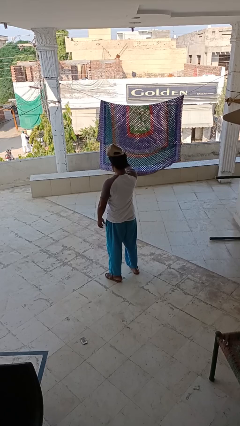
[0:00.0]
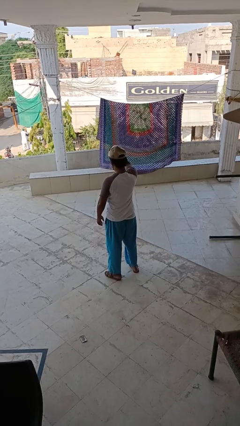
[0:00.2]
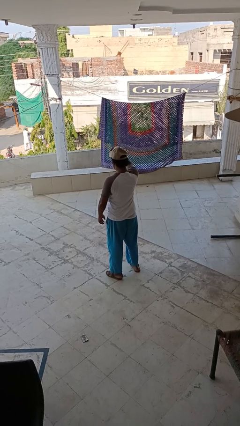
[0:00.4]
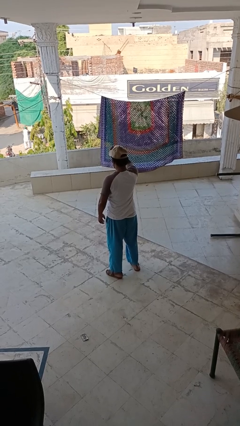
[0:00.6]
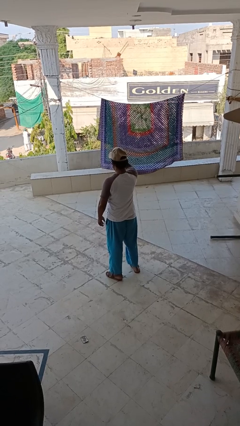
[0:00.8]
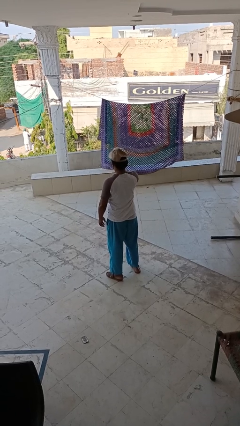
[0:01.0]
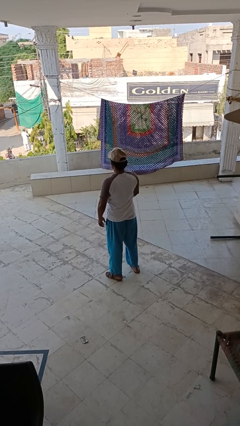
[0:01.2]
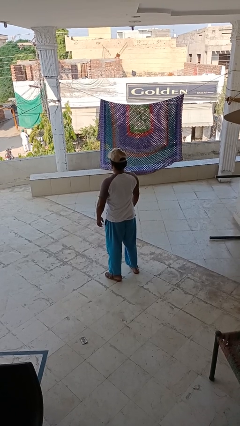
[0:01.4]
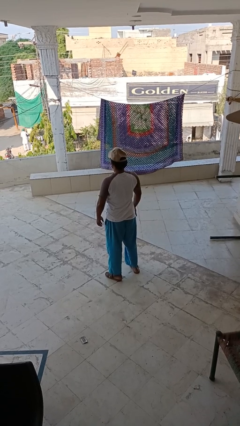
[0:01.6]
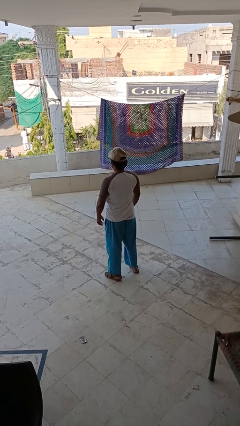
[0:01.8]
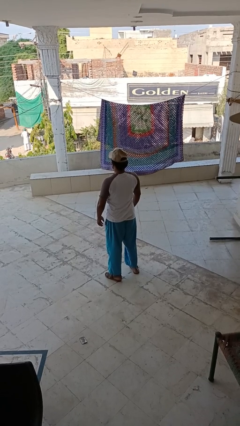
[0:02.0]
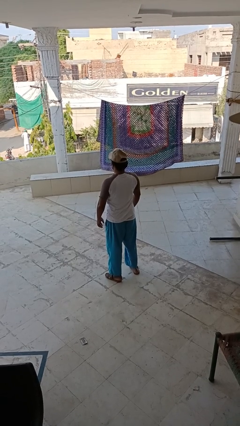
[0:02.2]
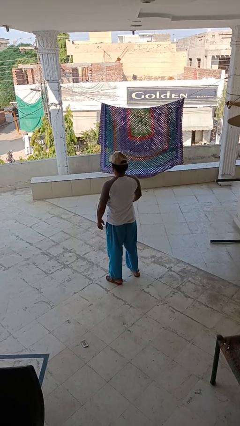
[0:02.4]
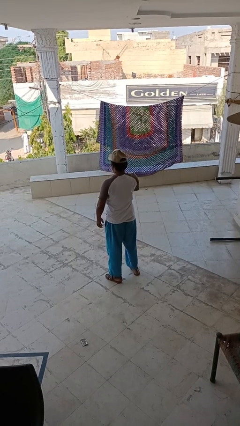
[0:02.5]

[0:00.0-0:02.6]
person puts on hat

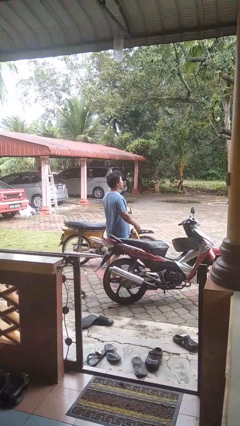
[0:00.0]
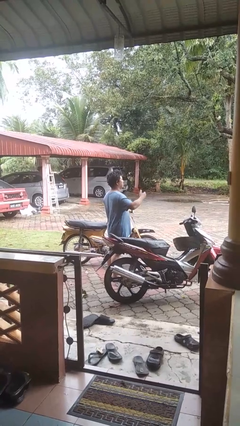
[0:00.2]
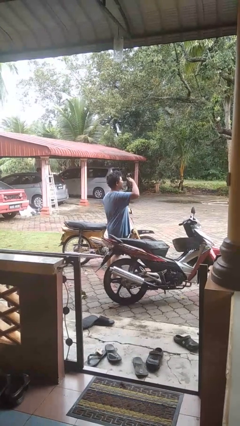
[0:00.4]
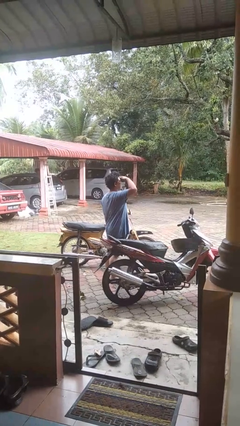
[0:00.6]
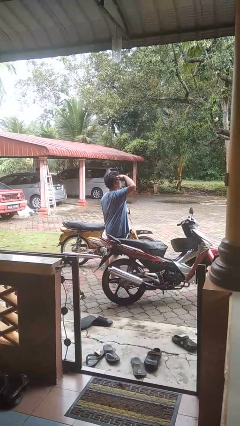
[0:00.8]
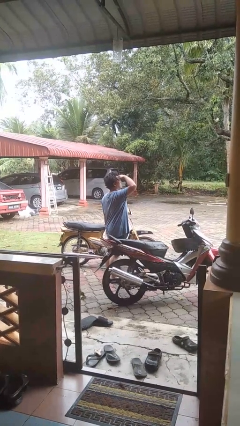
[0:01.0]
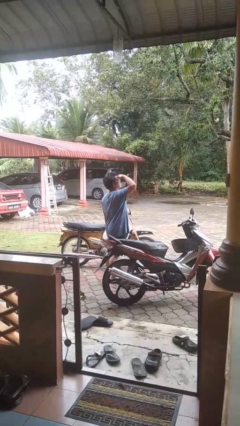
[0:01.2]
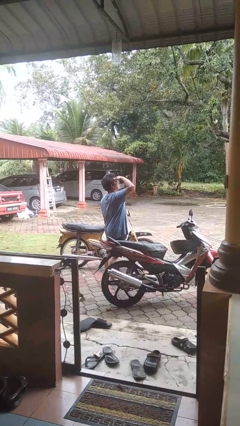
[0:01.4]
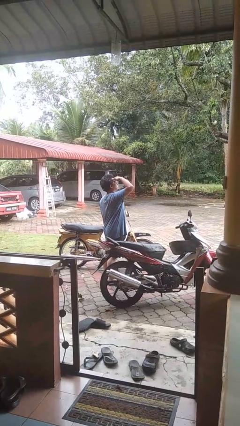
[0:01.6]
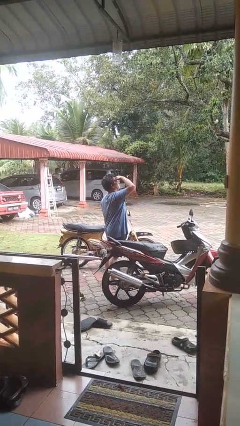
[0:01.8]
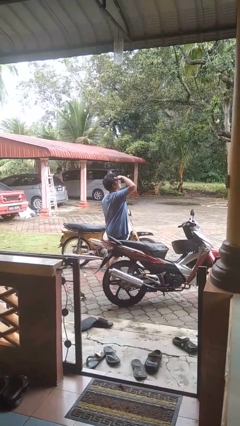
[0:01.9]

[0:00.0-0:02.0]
person shades eyes

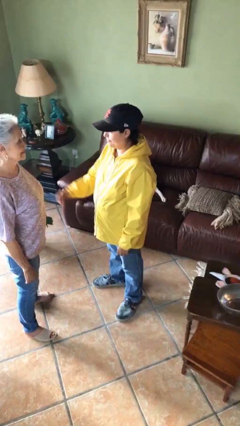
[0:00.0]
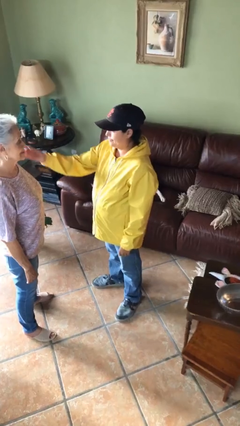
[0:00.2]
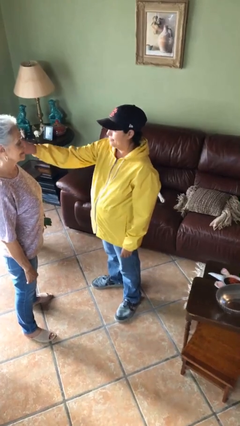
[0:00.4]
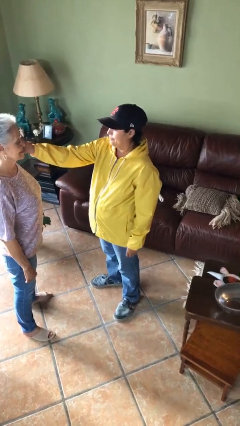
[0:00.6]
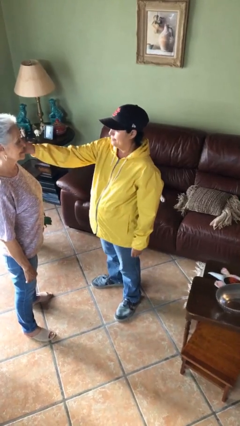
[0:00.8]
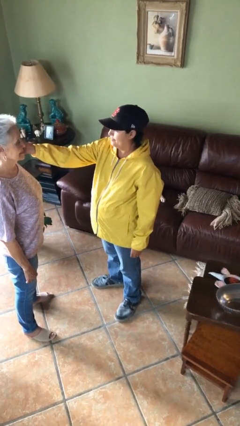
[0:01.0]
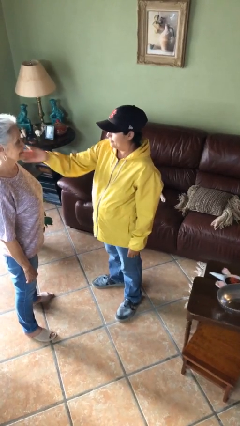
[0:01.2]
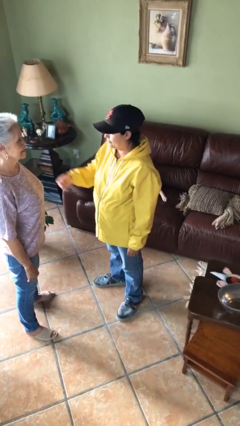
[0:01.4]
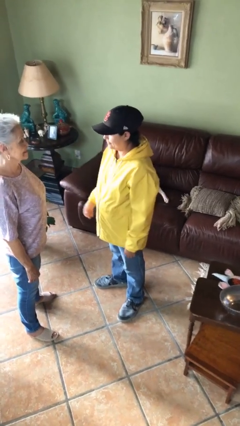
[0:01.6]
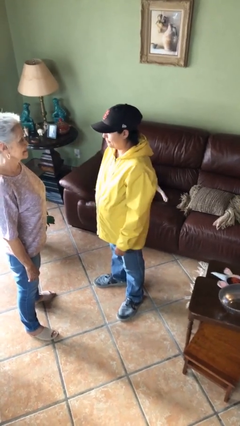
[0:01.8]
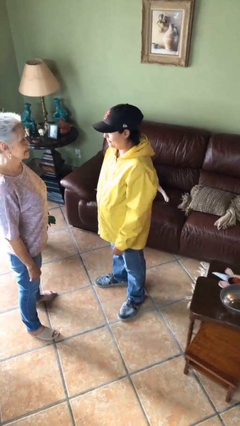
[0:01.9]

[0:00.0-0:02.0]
person touches face of person

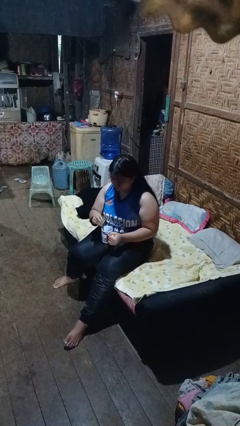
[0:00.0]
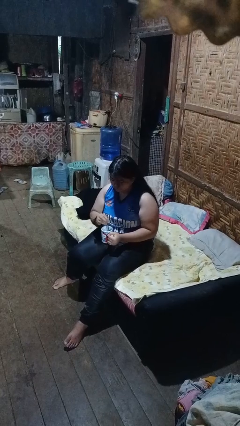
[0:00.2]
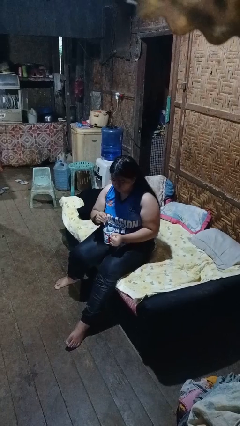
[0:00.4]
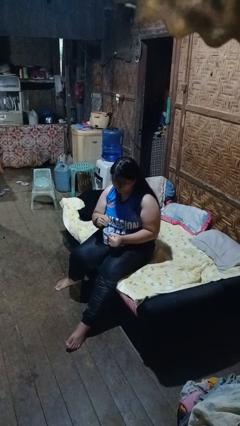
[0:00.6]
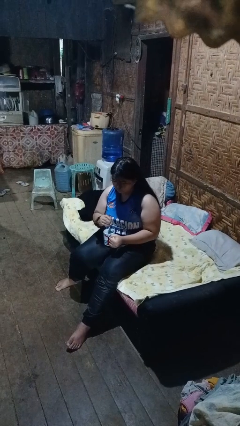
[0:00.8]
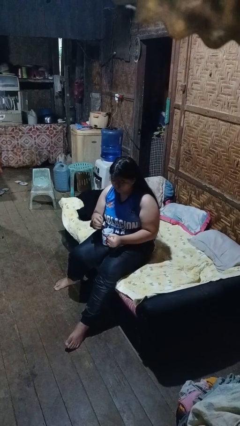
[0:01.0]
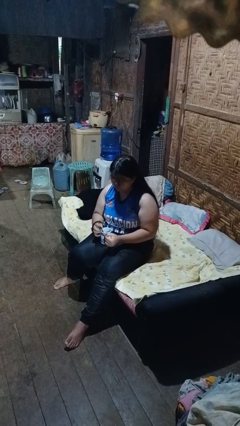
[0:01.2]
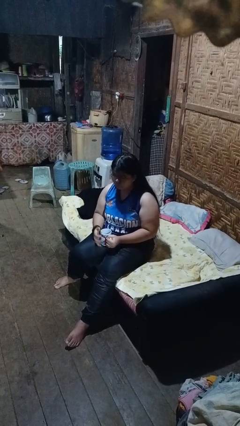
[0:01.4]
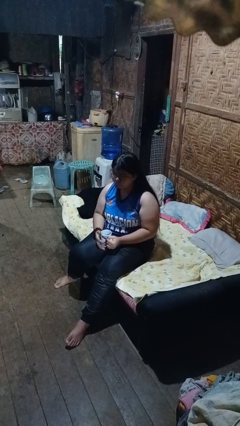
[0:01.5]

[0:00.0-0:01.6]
person stirs mug

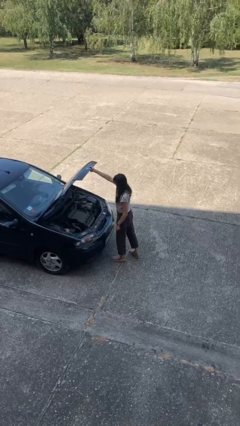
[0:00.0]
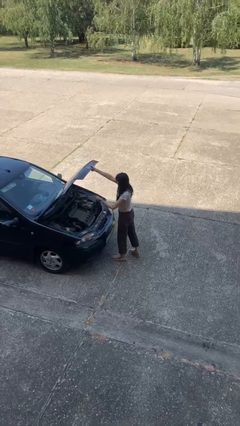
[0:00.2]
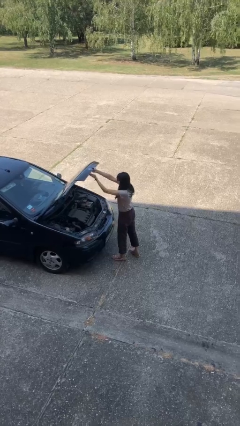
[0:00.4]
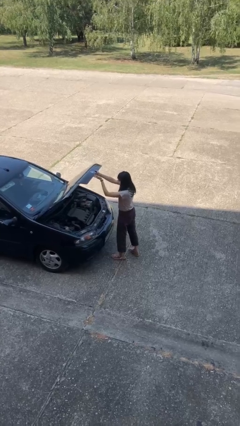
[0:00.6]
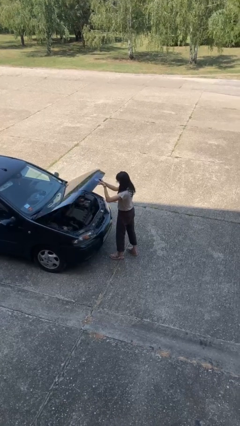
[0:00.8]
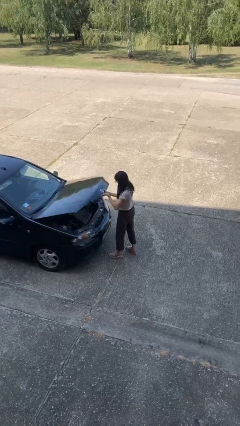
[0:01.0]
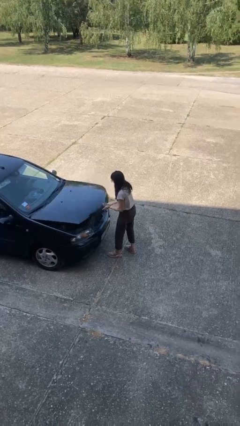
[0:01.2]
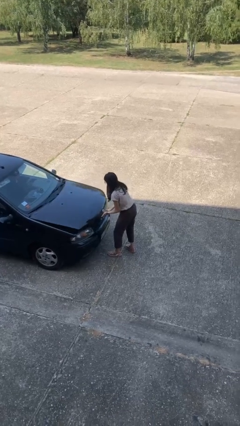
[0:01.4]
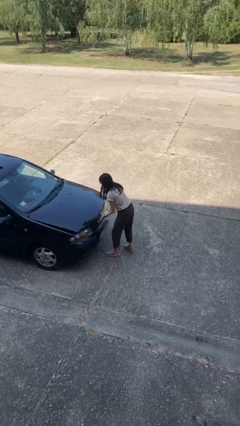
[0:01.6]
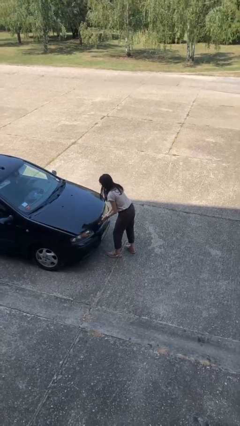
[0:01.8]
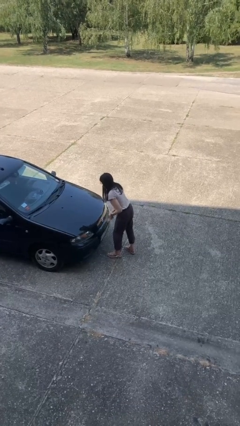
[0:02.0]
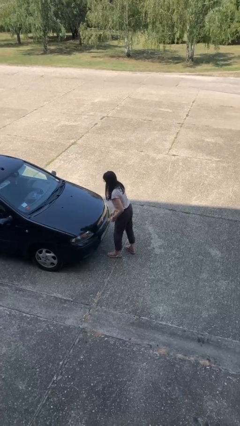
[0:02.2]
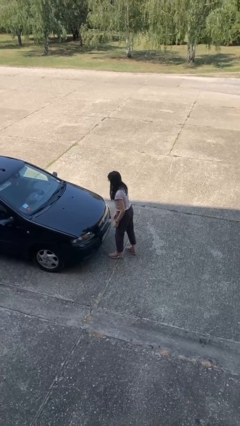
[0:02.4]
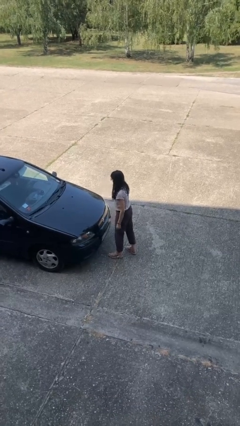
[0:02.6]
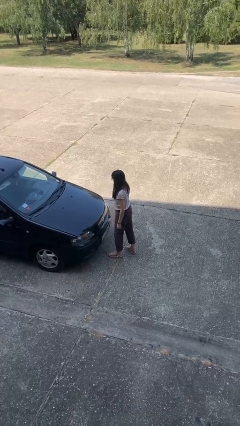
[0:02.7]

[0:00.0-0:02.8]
person closes car hood

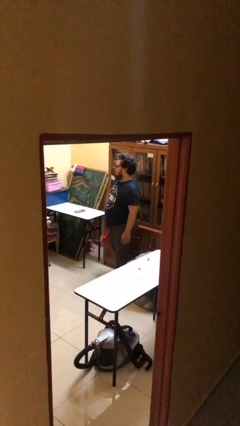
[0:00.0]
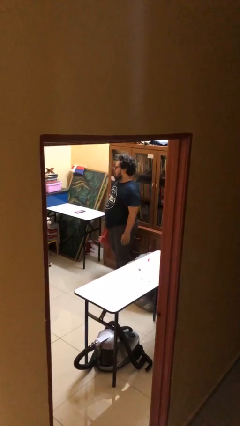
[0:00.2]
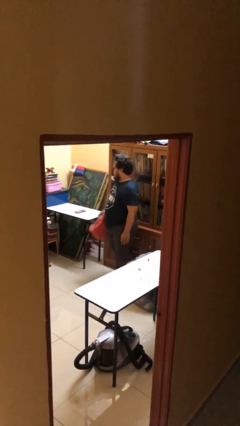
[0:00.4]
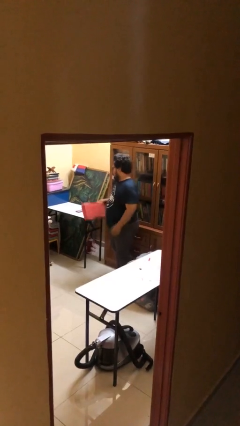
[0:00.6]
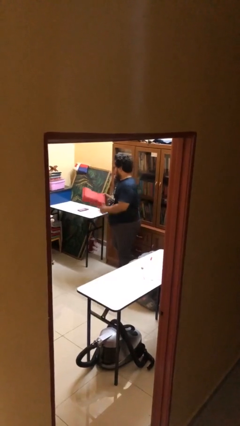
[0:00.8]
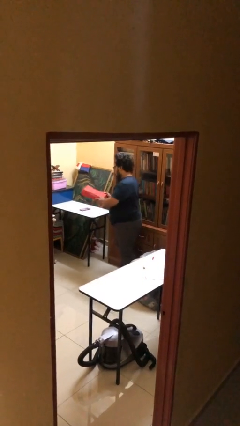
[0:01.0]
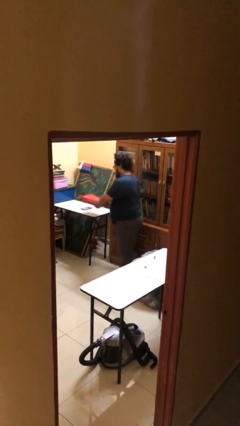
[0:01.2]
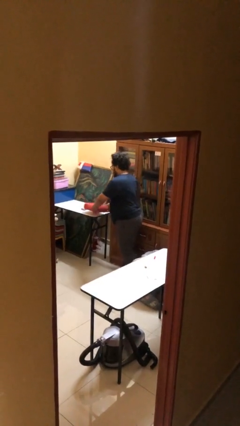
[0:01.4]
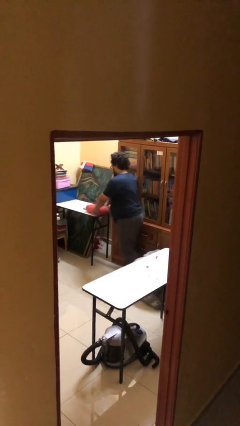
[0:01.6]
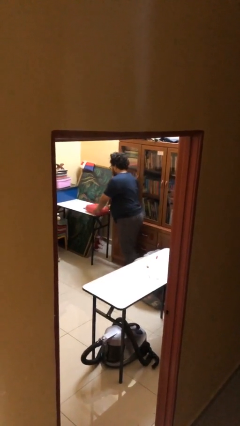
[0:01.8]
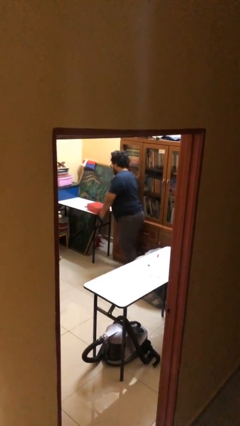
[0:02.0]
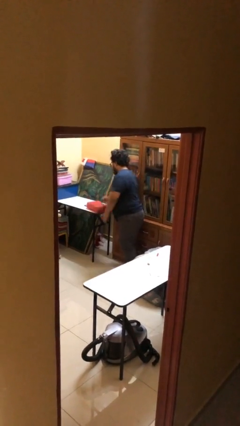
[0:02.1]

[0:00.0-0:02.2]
person puts down object on table

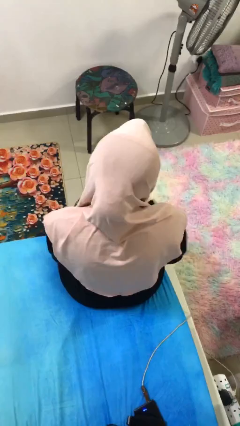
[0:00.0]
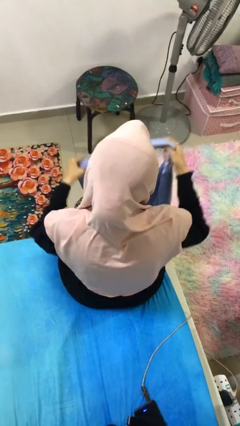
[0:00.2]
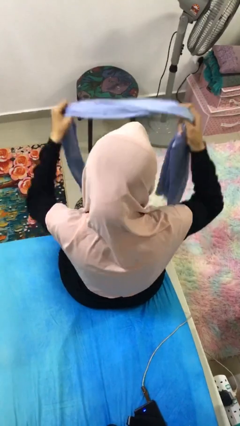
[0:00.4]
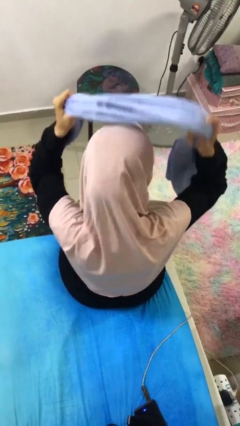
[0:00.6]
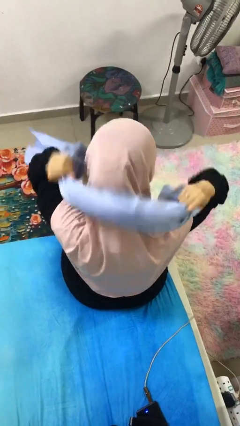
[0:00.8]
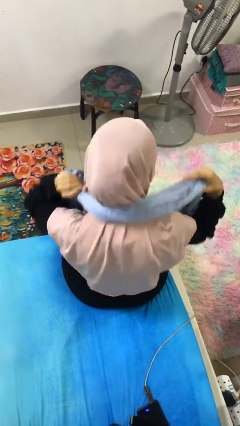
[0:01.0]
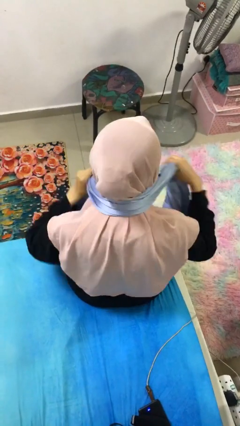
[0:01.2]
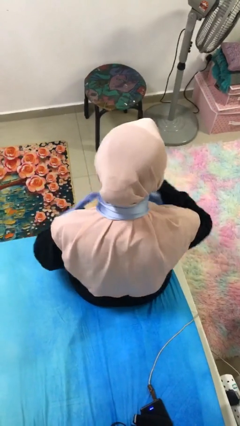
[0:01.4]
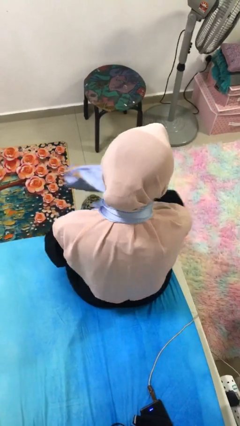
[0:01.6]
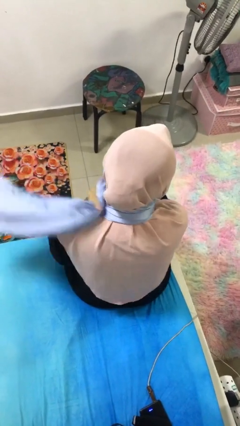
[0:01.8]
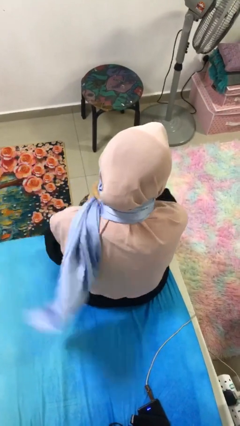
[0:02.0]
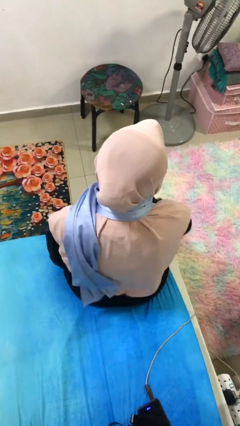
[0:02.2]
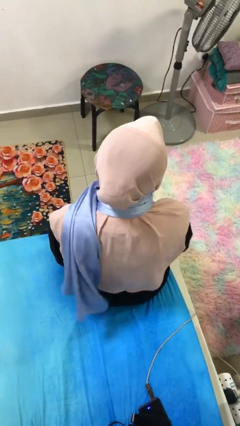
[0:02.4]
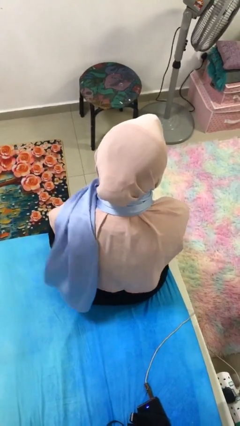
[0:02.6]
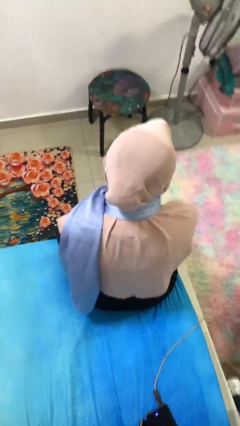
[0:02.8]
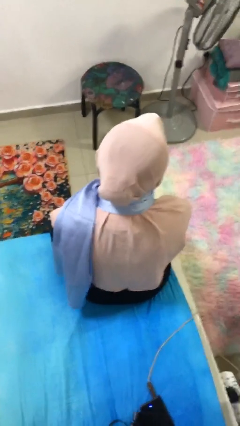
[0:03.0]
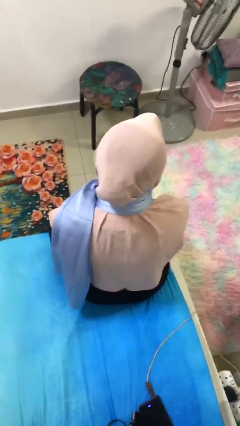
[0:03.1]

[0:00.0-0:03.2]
person puts on scarf

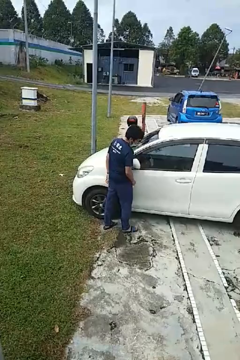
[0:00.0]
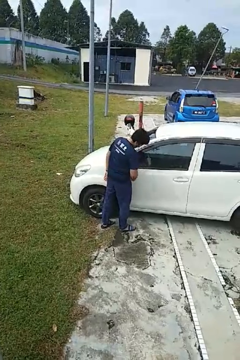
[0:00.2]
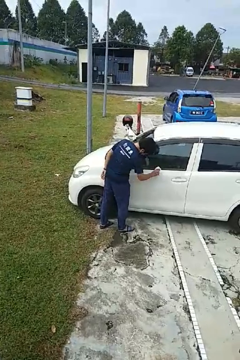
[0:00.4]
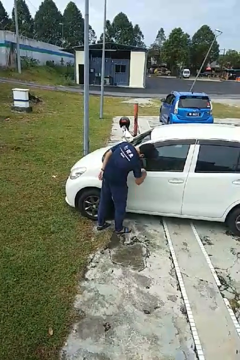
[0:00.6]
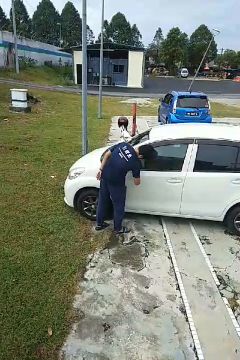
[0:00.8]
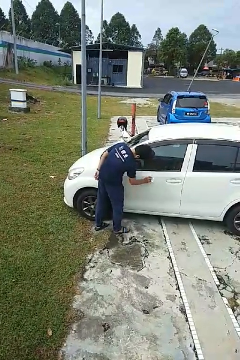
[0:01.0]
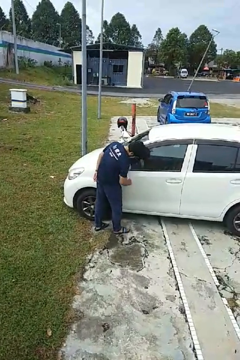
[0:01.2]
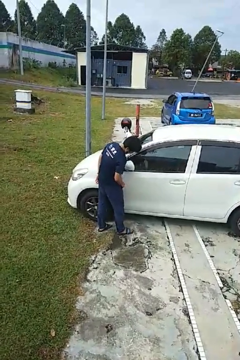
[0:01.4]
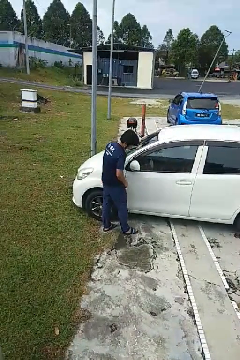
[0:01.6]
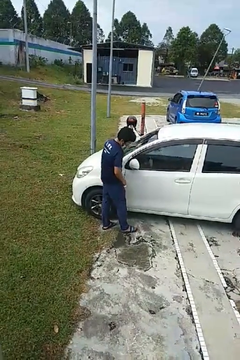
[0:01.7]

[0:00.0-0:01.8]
person polishes car with rag
